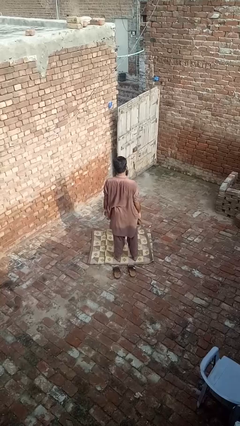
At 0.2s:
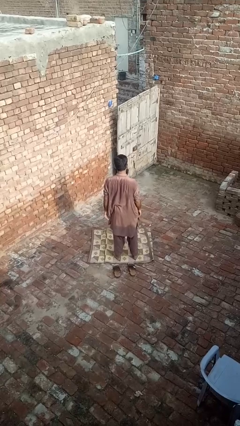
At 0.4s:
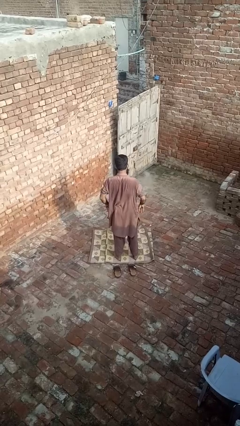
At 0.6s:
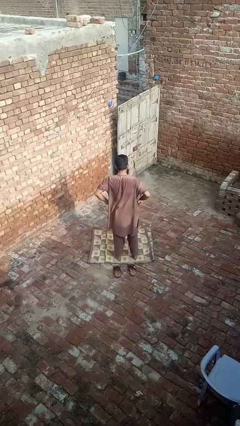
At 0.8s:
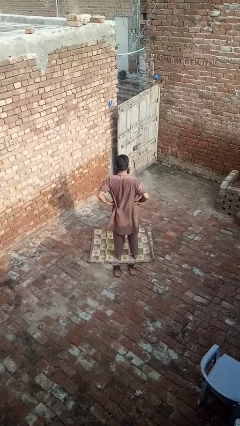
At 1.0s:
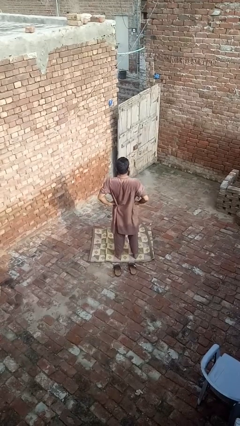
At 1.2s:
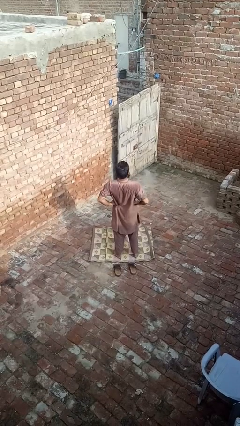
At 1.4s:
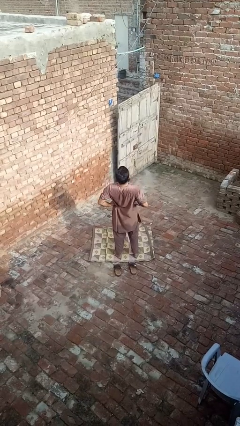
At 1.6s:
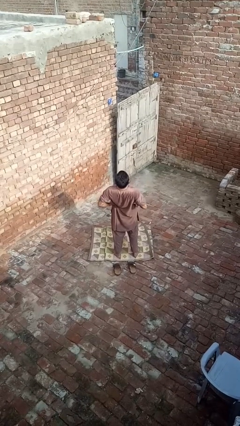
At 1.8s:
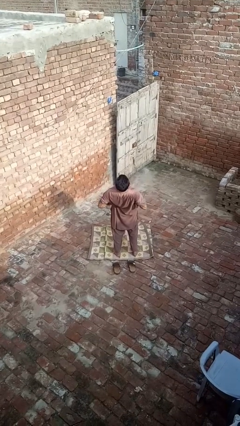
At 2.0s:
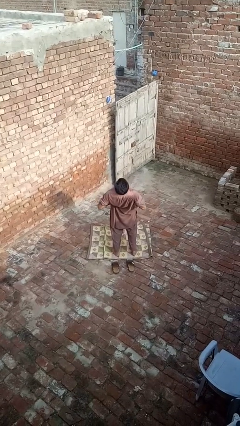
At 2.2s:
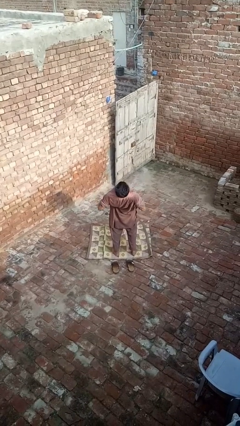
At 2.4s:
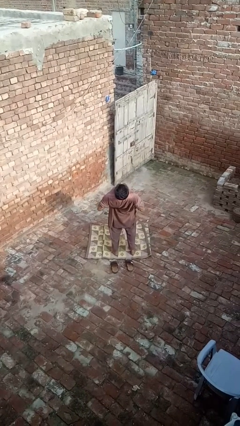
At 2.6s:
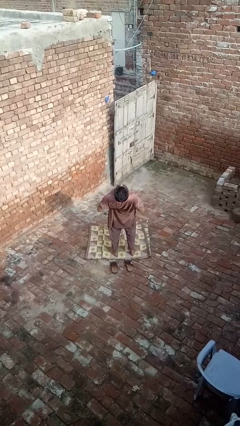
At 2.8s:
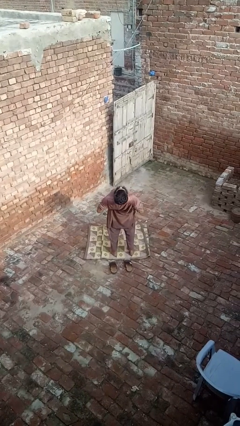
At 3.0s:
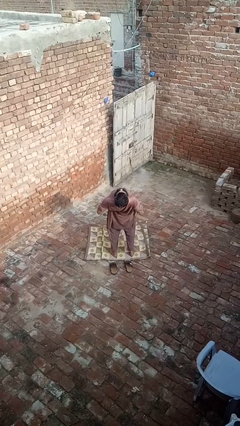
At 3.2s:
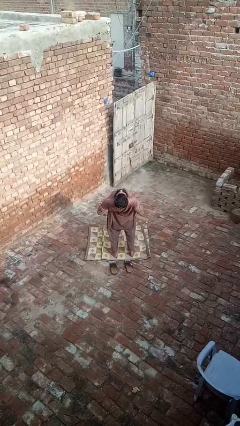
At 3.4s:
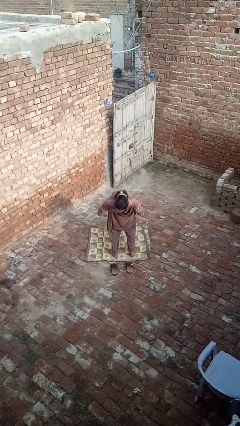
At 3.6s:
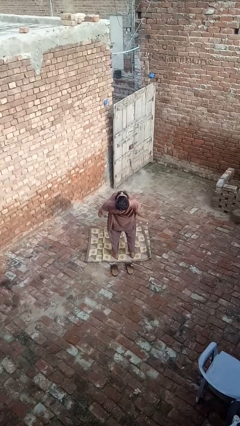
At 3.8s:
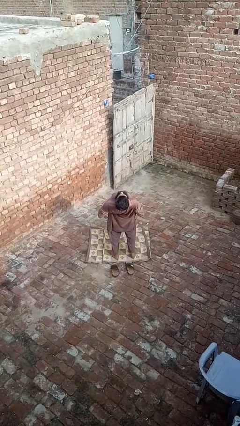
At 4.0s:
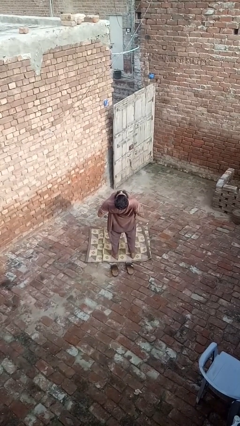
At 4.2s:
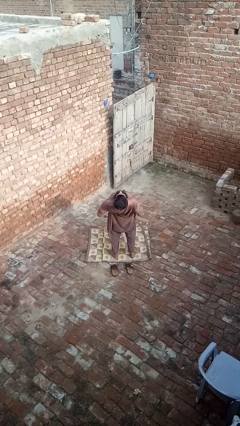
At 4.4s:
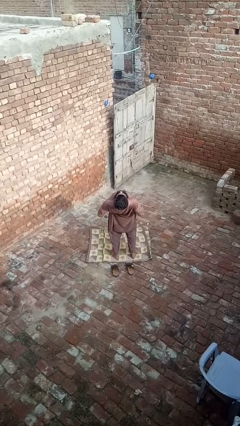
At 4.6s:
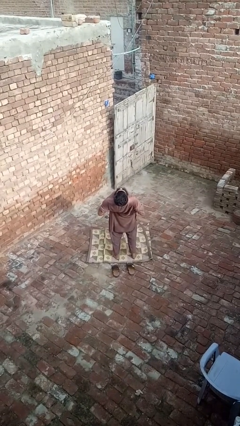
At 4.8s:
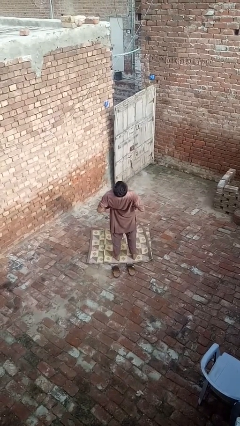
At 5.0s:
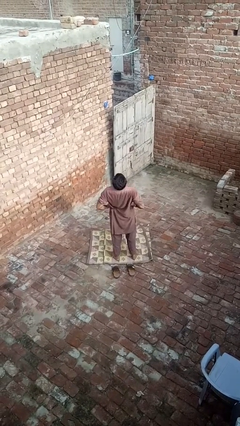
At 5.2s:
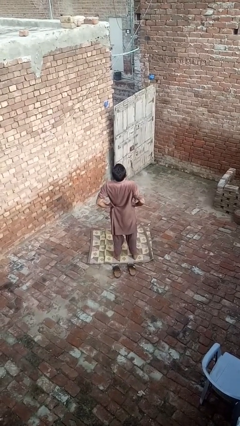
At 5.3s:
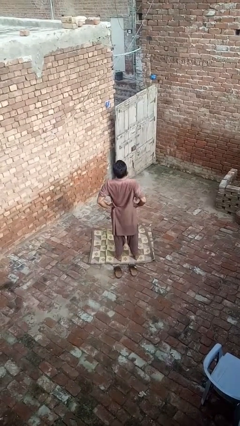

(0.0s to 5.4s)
person stretches back

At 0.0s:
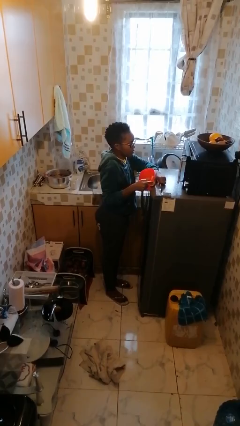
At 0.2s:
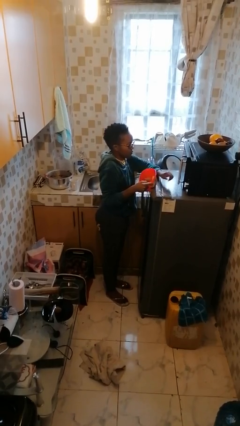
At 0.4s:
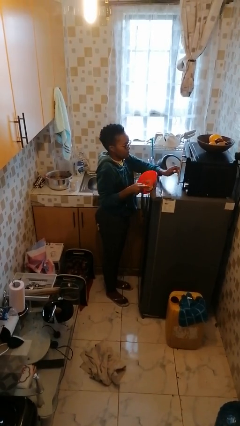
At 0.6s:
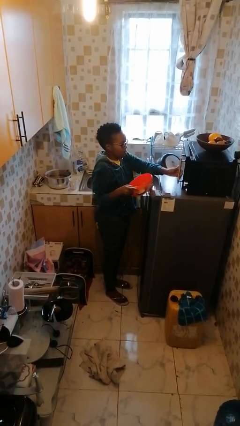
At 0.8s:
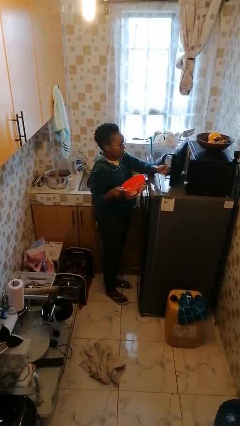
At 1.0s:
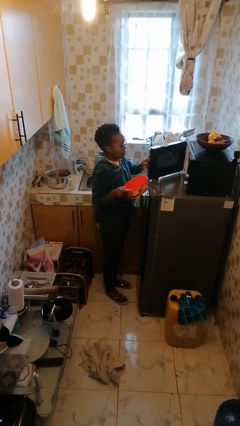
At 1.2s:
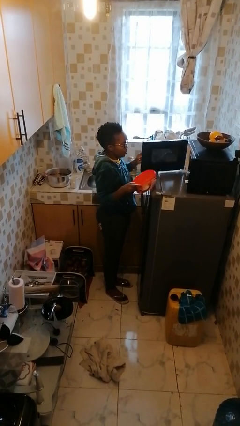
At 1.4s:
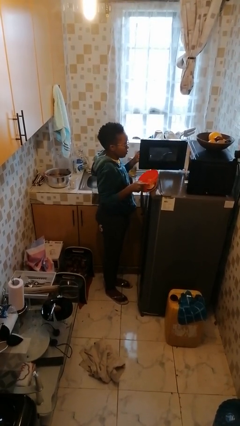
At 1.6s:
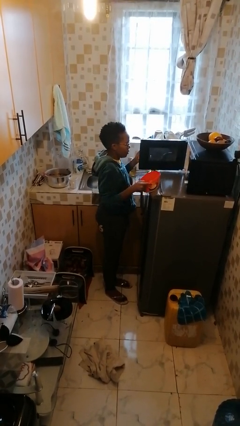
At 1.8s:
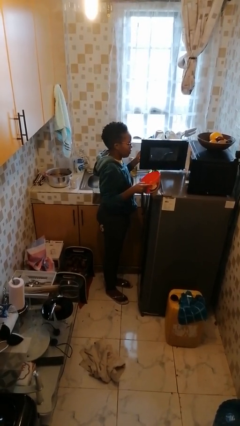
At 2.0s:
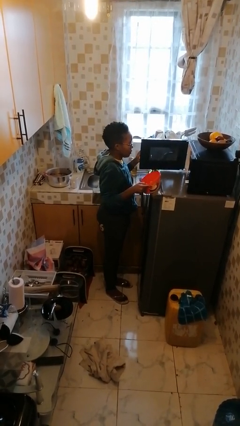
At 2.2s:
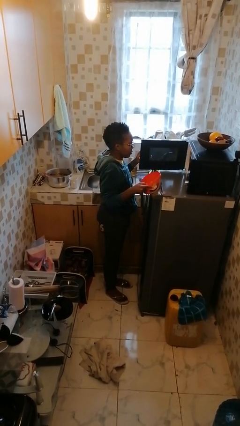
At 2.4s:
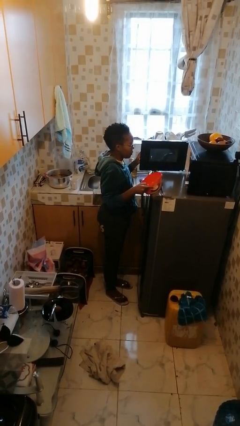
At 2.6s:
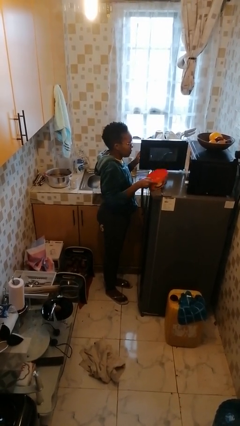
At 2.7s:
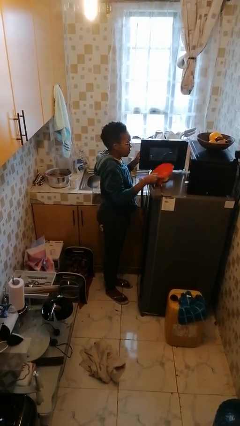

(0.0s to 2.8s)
person opens microwave

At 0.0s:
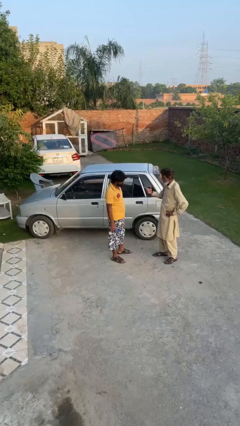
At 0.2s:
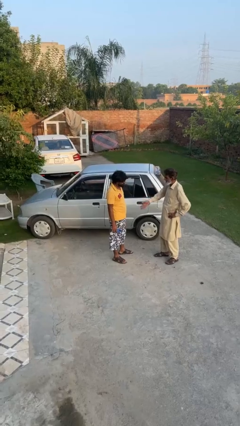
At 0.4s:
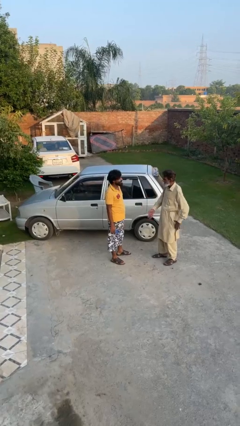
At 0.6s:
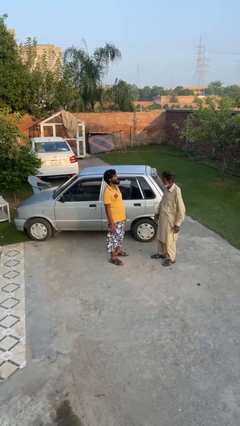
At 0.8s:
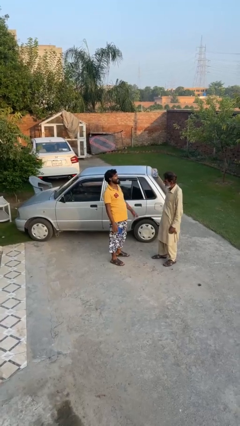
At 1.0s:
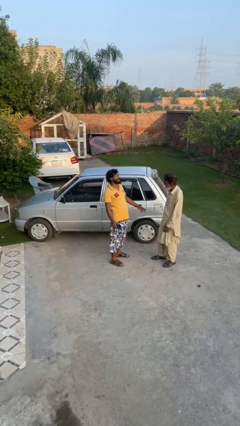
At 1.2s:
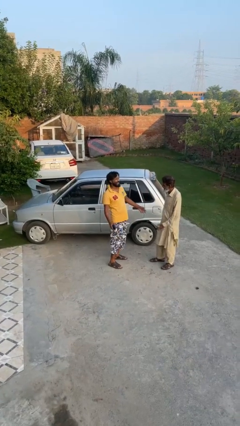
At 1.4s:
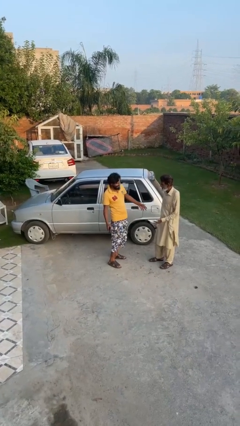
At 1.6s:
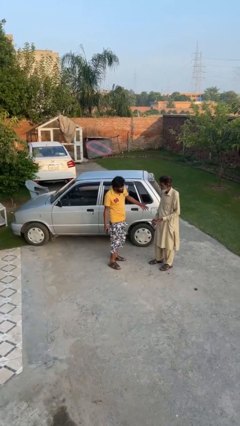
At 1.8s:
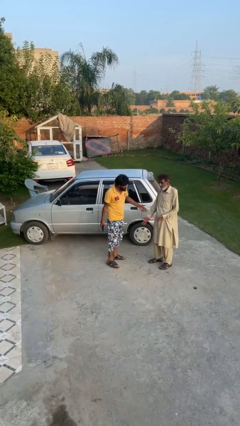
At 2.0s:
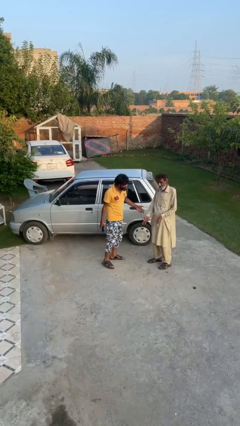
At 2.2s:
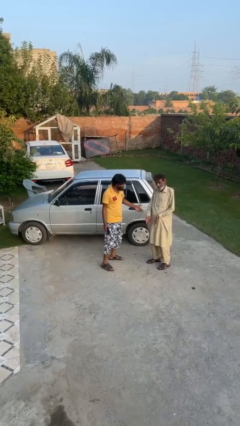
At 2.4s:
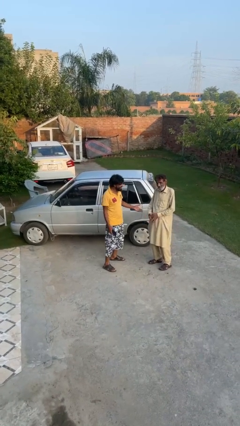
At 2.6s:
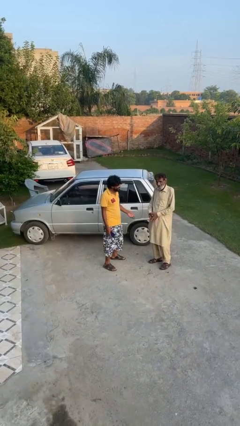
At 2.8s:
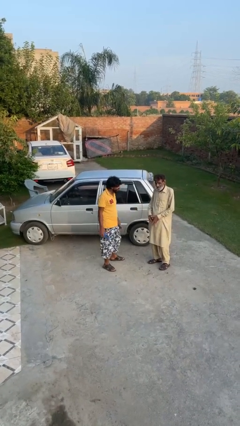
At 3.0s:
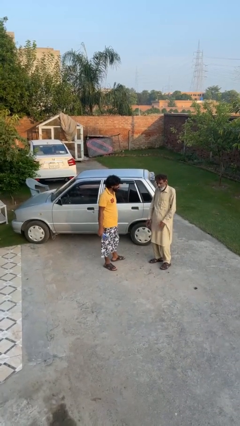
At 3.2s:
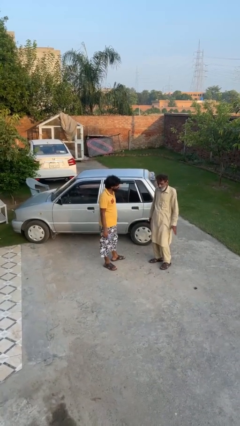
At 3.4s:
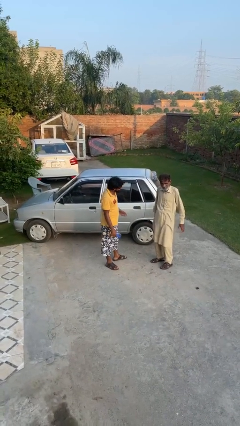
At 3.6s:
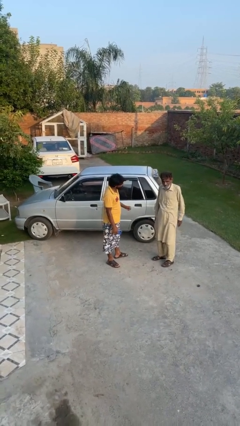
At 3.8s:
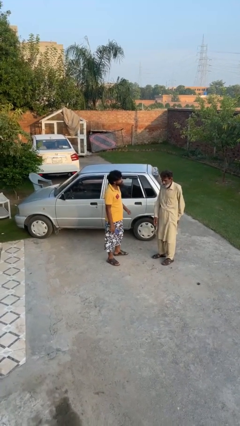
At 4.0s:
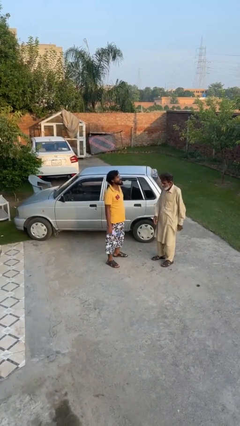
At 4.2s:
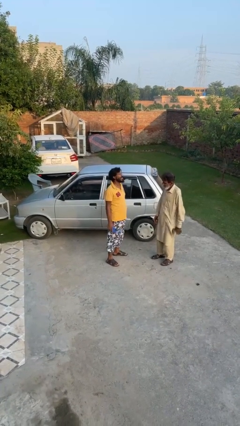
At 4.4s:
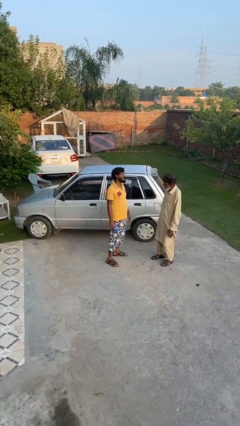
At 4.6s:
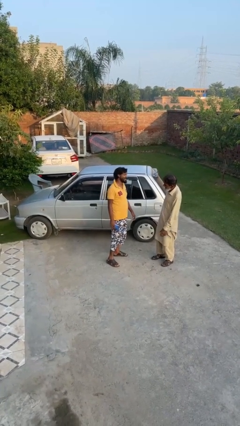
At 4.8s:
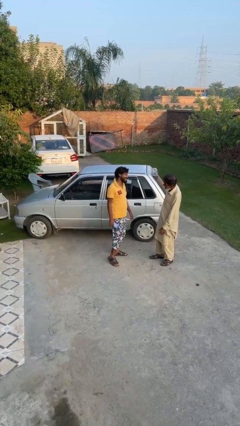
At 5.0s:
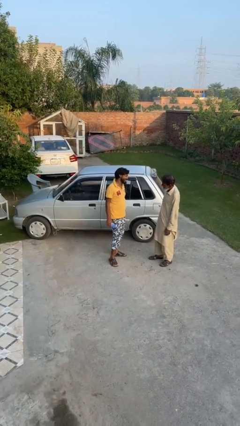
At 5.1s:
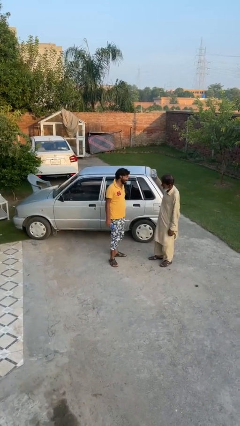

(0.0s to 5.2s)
person laughs with person

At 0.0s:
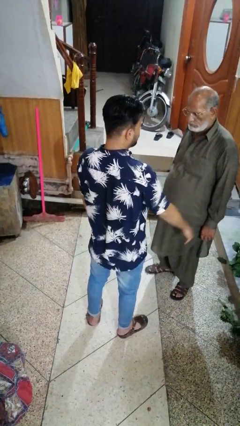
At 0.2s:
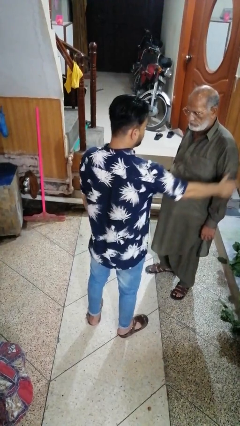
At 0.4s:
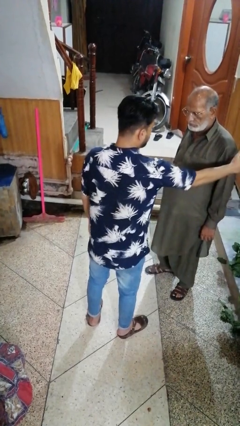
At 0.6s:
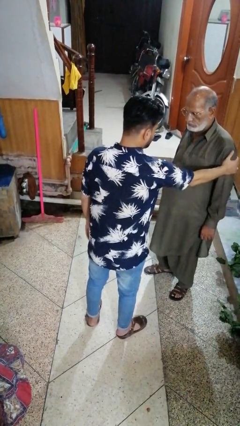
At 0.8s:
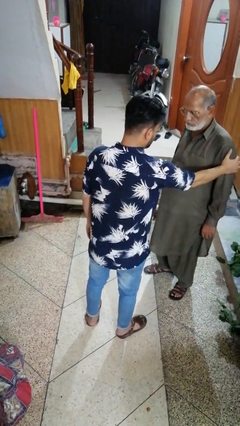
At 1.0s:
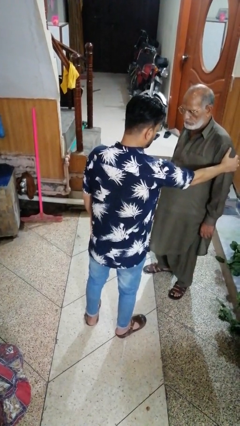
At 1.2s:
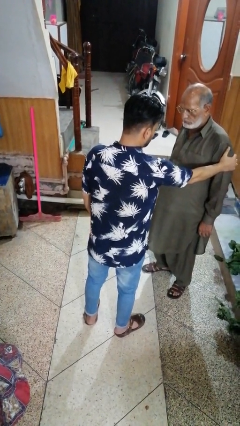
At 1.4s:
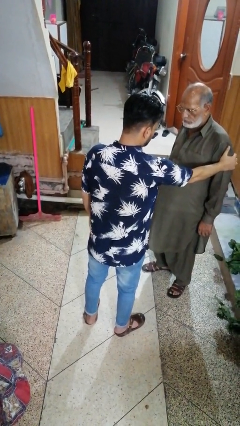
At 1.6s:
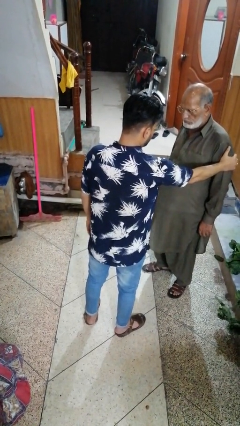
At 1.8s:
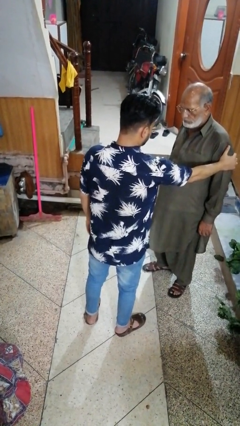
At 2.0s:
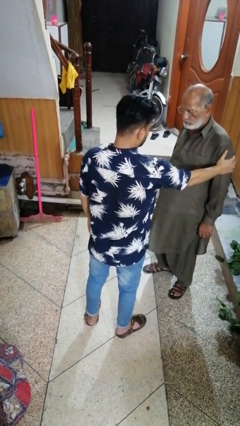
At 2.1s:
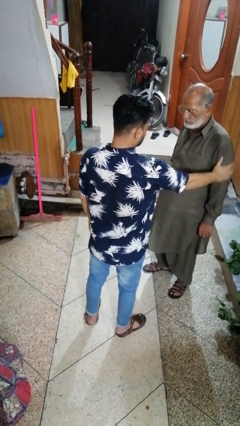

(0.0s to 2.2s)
person grabs person by bicep

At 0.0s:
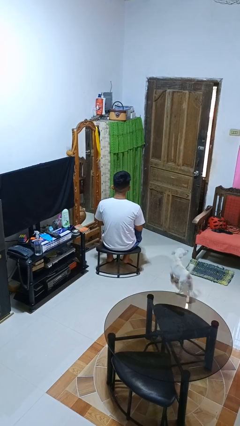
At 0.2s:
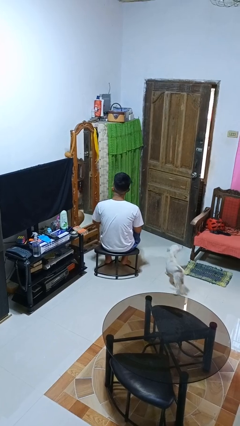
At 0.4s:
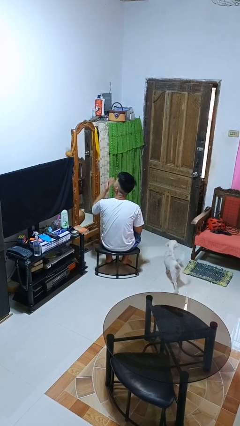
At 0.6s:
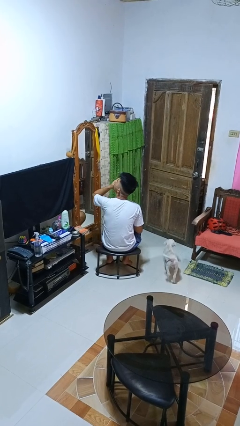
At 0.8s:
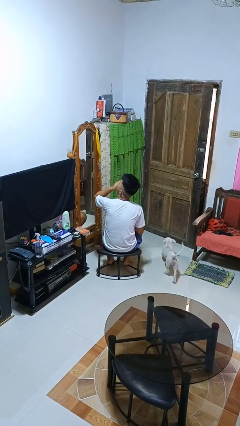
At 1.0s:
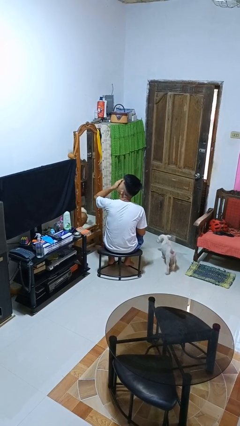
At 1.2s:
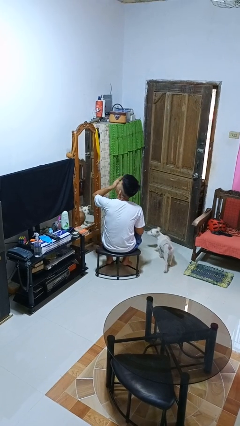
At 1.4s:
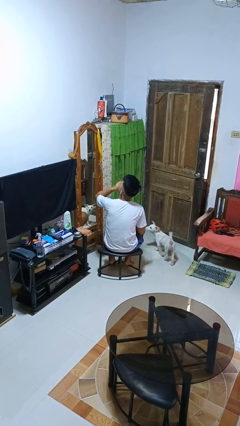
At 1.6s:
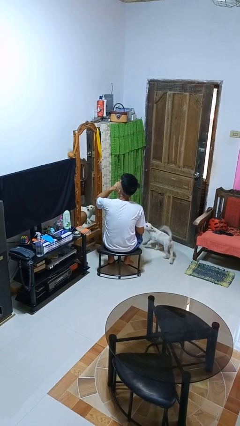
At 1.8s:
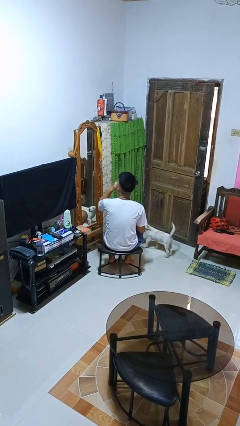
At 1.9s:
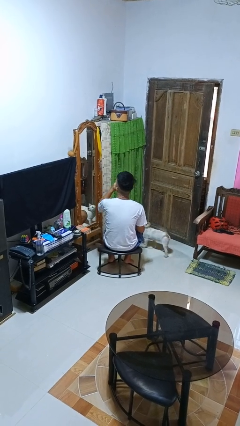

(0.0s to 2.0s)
person yawns
